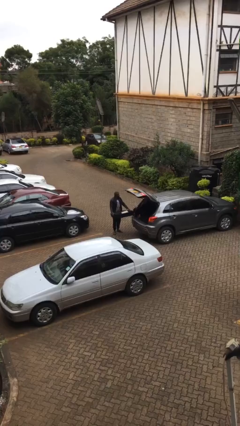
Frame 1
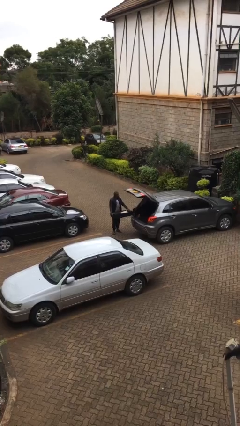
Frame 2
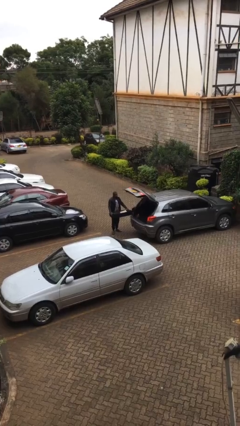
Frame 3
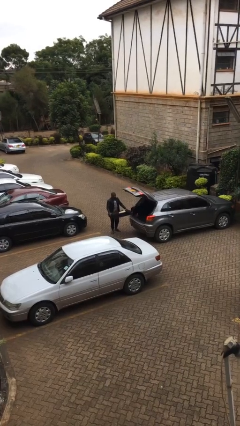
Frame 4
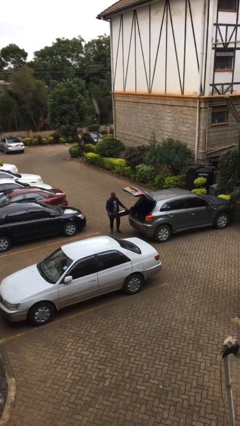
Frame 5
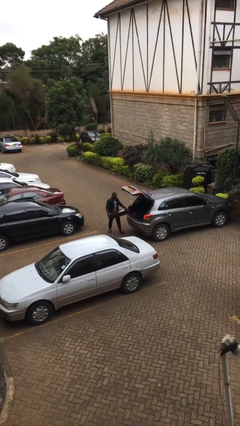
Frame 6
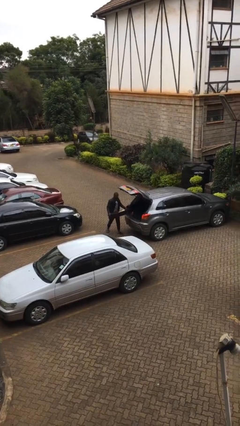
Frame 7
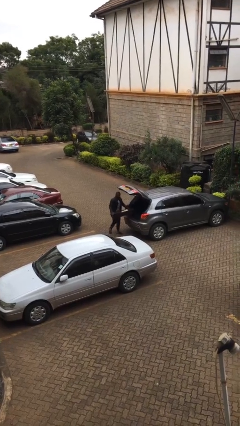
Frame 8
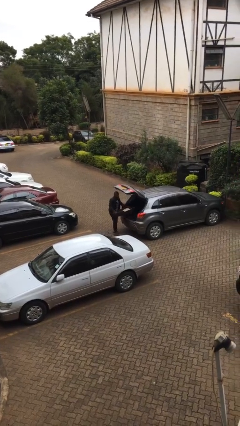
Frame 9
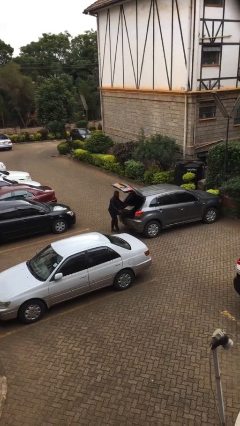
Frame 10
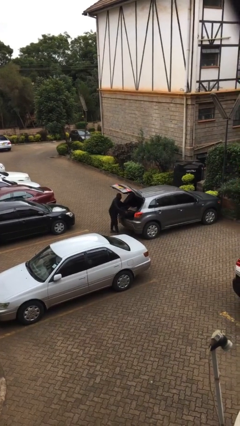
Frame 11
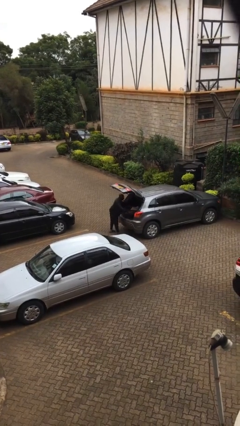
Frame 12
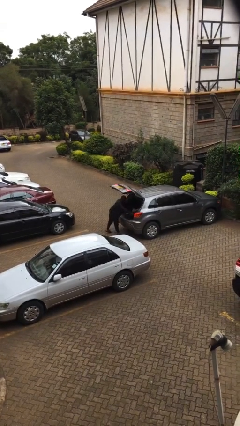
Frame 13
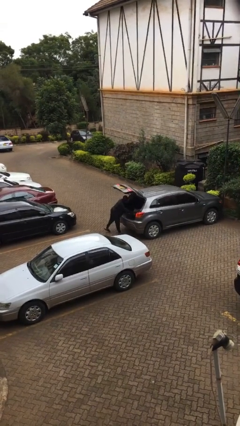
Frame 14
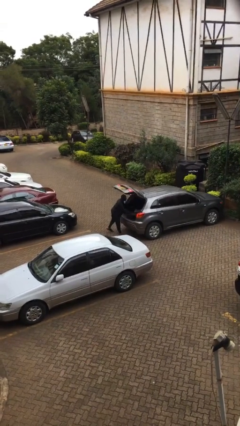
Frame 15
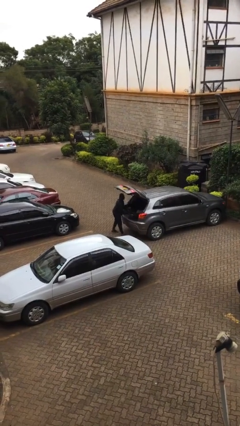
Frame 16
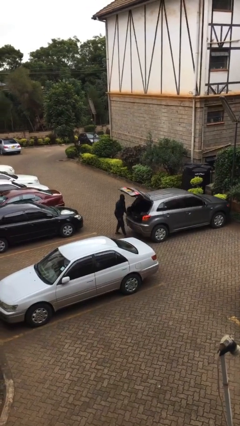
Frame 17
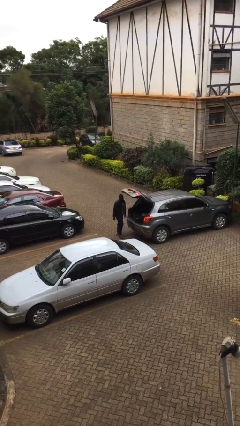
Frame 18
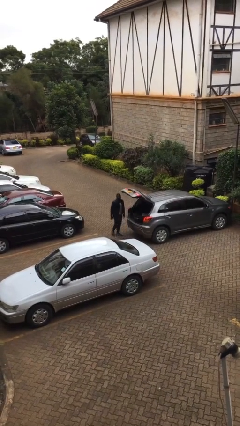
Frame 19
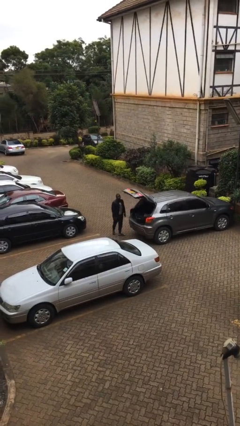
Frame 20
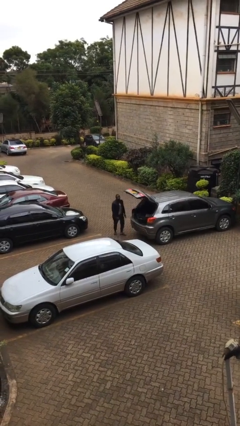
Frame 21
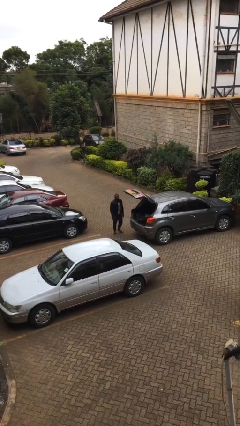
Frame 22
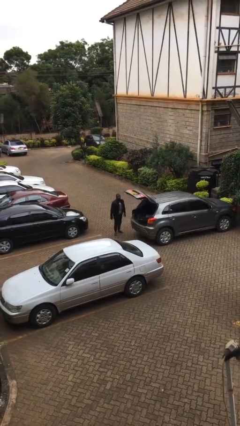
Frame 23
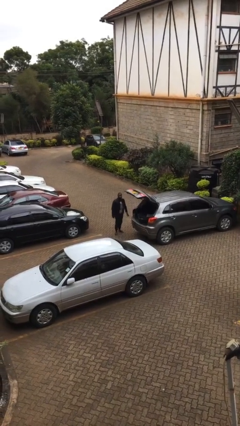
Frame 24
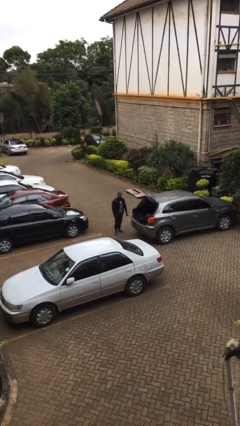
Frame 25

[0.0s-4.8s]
person loads car

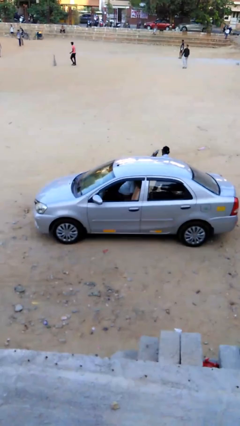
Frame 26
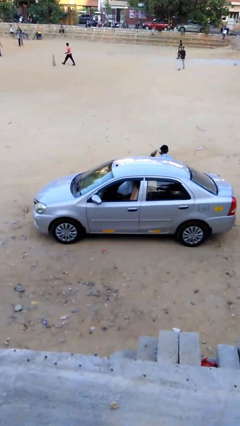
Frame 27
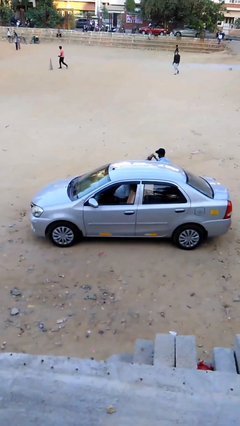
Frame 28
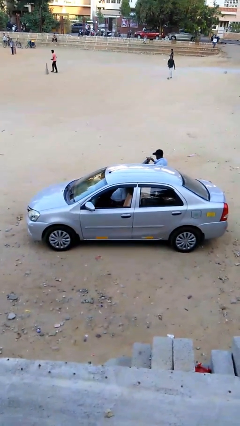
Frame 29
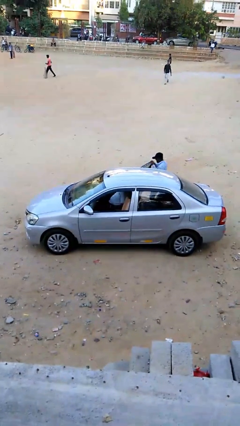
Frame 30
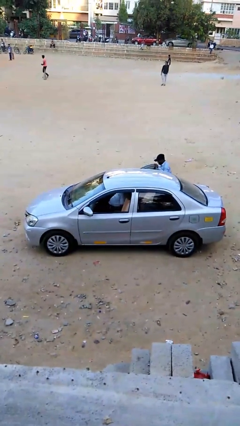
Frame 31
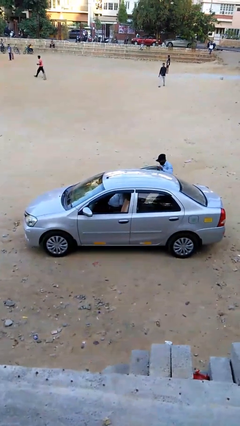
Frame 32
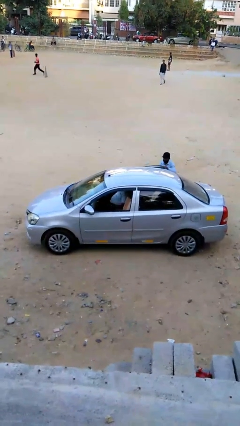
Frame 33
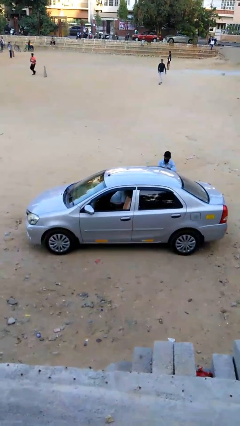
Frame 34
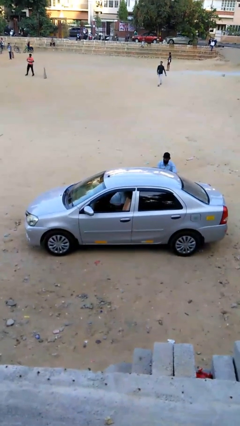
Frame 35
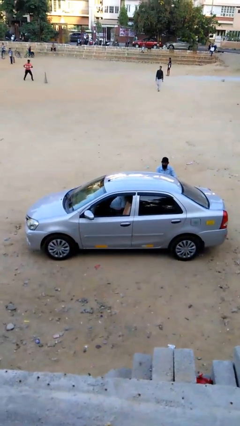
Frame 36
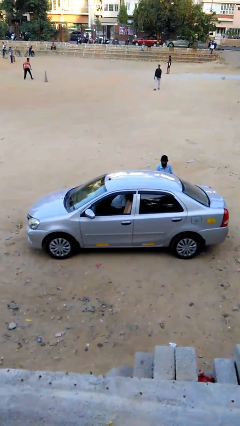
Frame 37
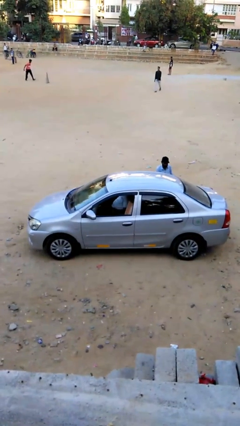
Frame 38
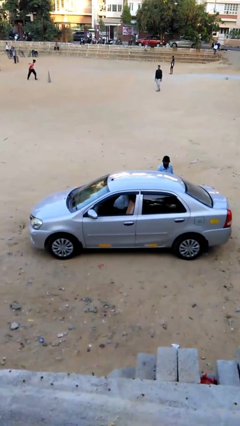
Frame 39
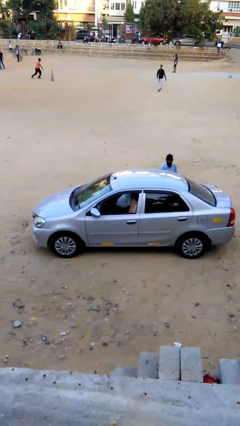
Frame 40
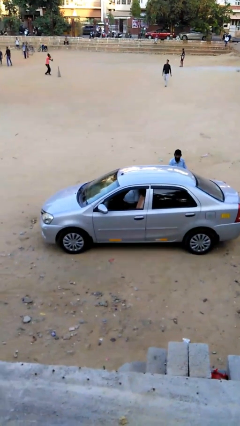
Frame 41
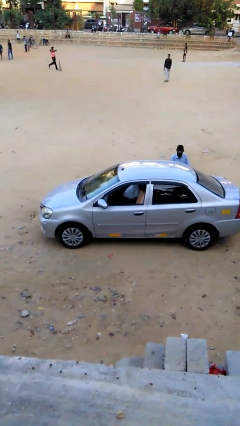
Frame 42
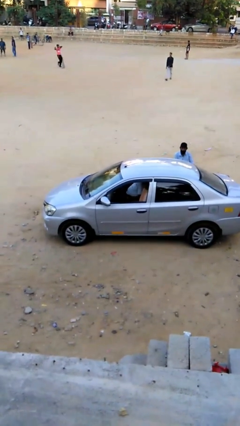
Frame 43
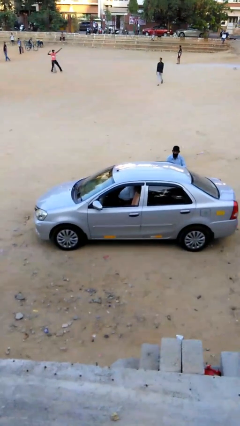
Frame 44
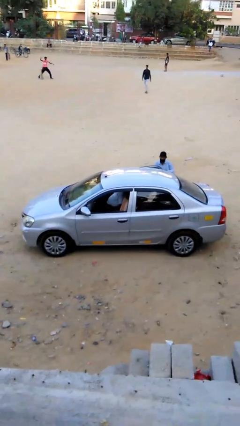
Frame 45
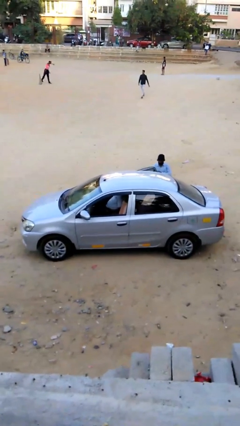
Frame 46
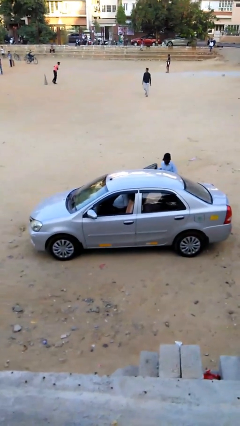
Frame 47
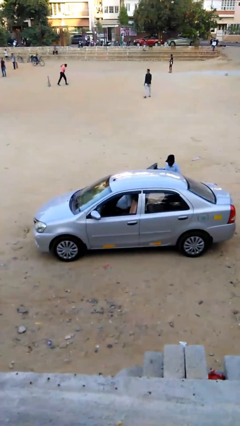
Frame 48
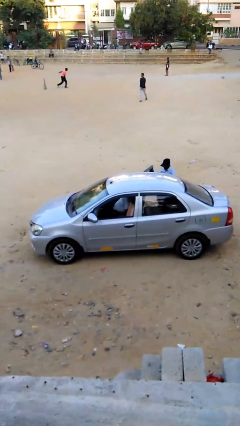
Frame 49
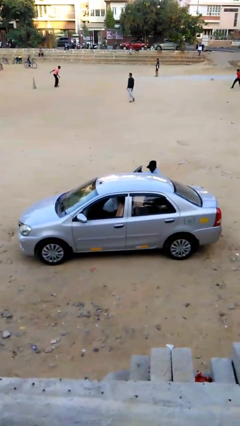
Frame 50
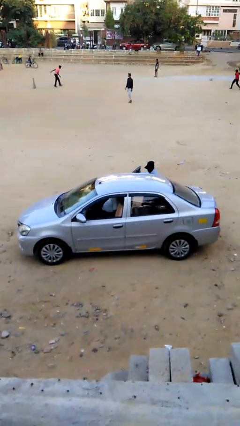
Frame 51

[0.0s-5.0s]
car drops off person

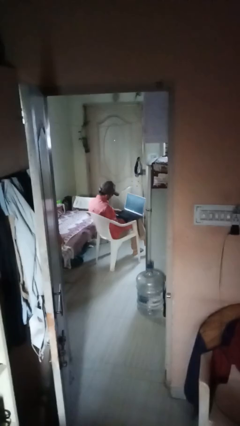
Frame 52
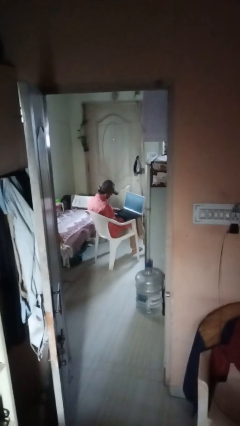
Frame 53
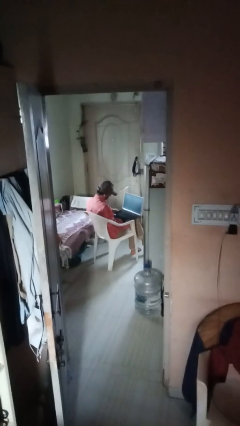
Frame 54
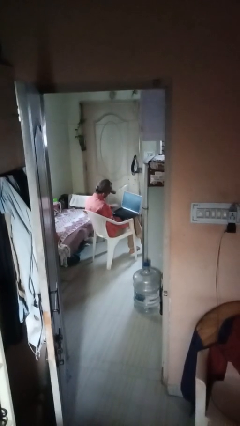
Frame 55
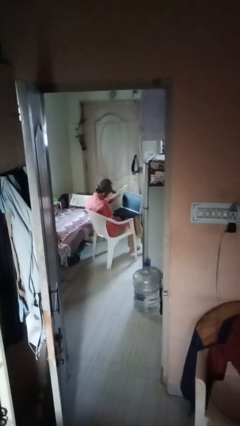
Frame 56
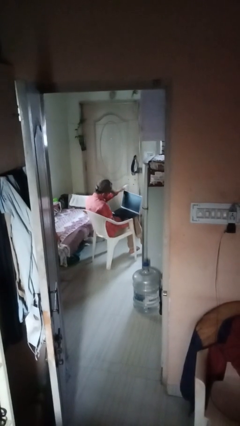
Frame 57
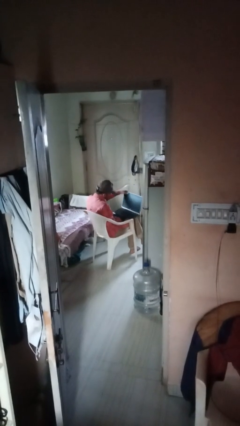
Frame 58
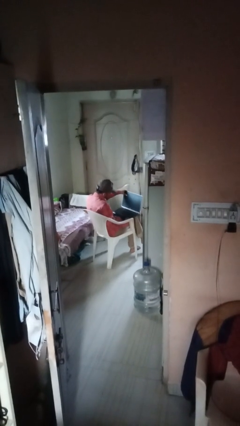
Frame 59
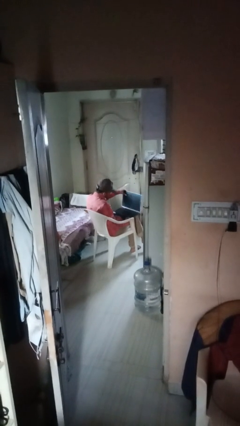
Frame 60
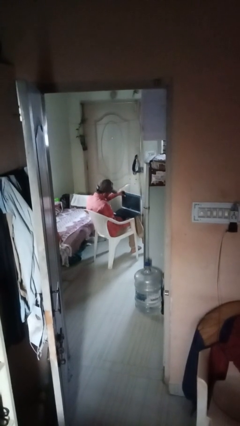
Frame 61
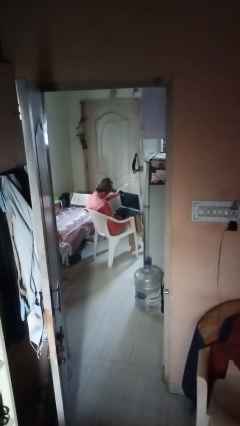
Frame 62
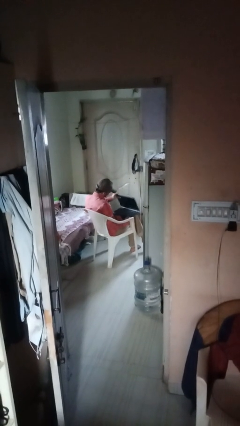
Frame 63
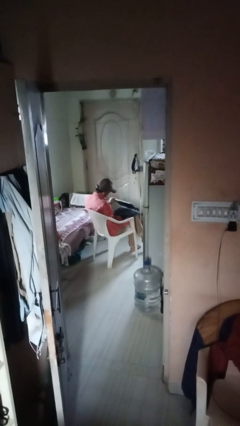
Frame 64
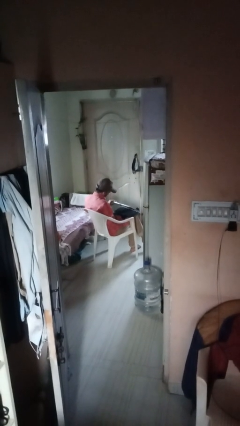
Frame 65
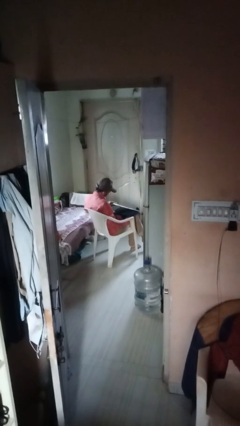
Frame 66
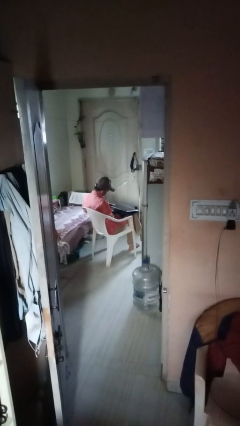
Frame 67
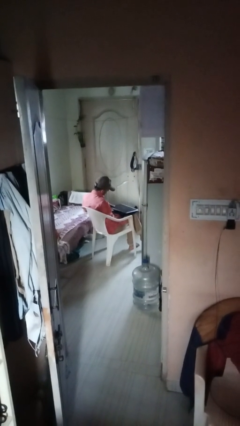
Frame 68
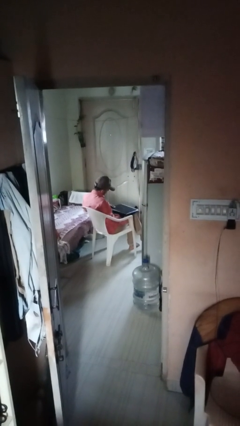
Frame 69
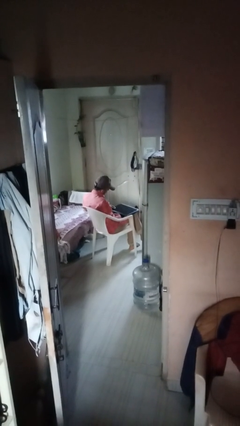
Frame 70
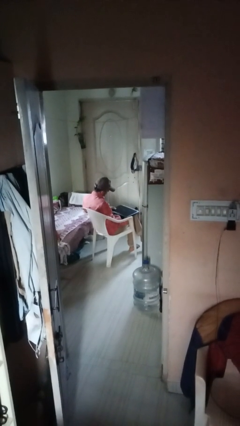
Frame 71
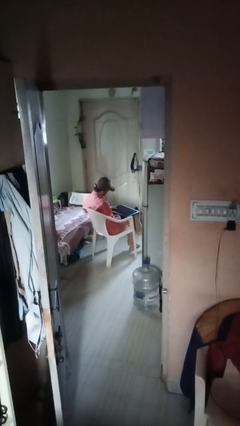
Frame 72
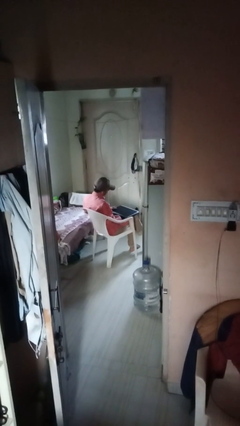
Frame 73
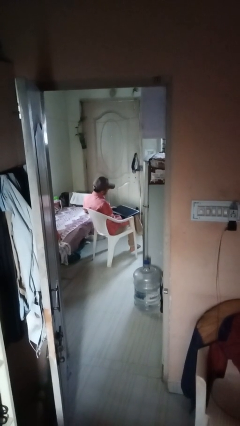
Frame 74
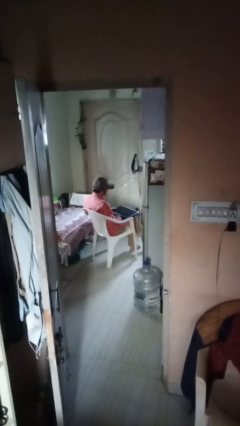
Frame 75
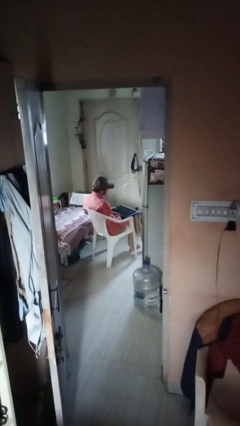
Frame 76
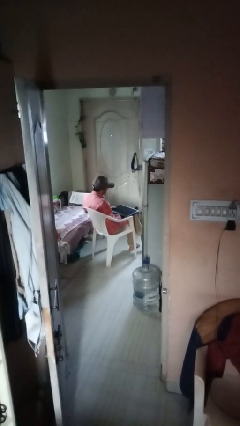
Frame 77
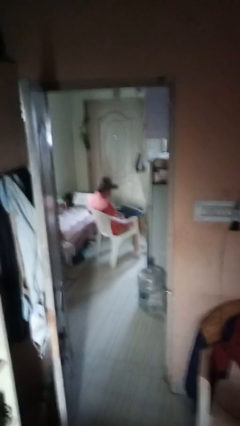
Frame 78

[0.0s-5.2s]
person closes laptop

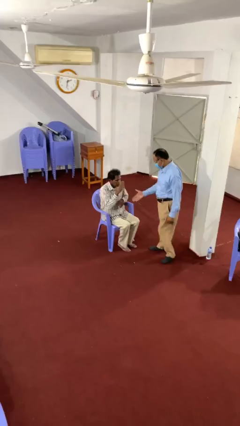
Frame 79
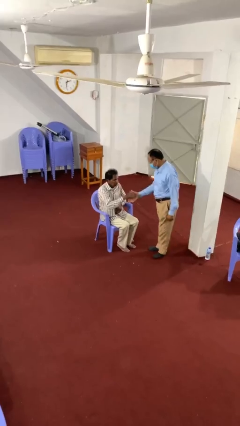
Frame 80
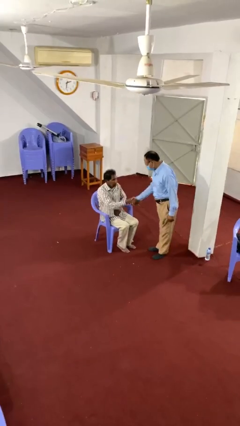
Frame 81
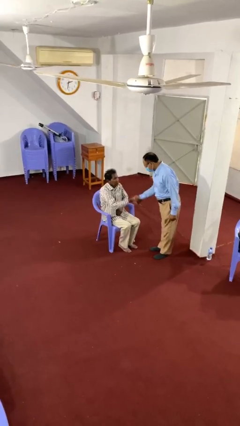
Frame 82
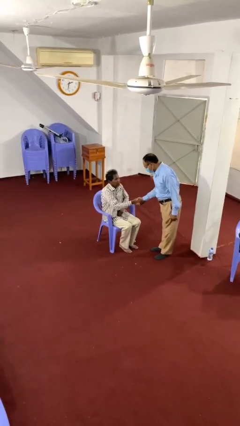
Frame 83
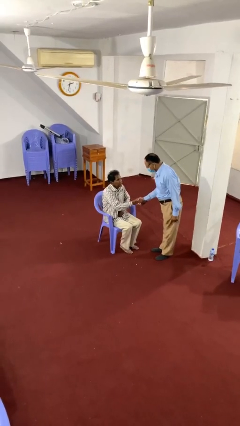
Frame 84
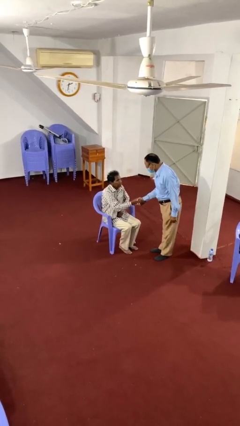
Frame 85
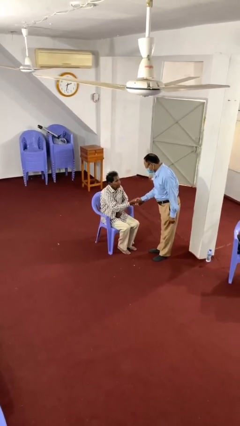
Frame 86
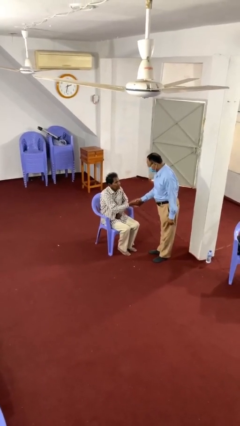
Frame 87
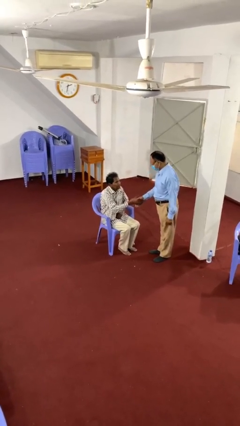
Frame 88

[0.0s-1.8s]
person shakes hand

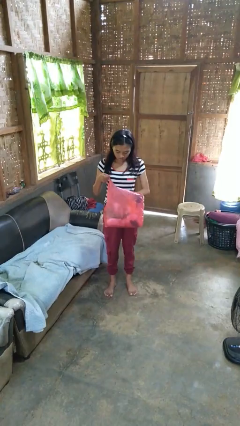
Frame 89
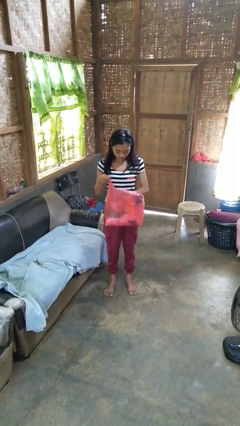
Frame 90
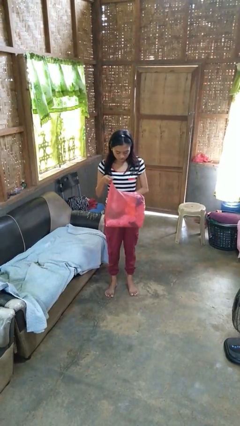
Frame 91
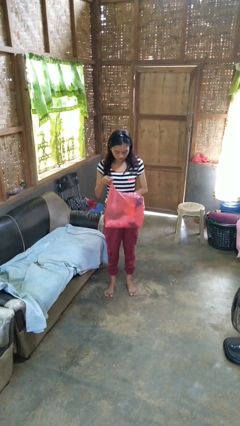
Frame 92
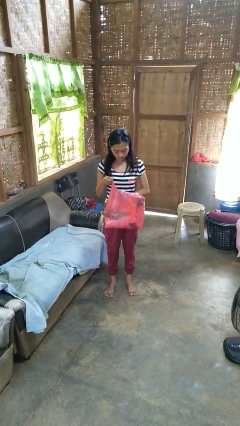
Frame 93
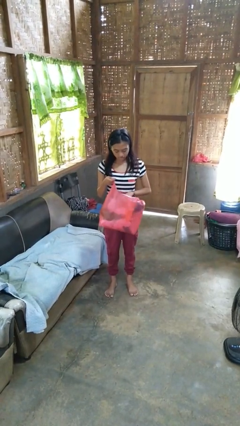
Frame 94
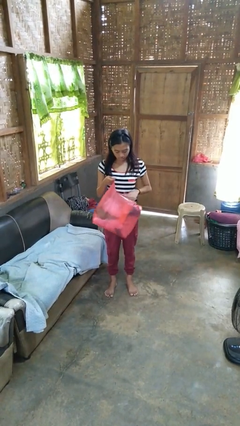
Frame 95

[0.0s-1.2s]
person searches in bag
